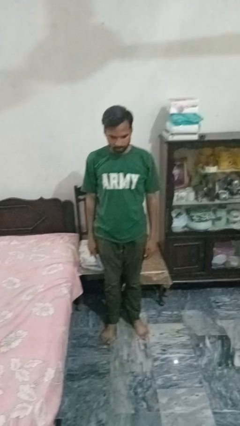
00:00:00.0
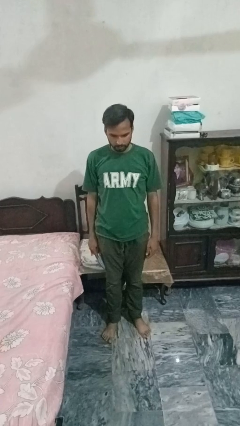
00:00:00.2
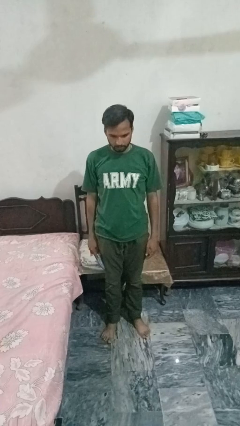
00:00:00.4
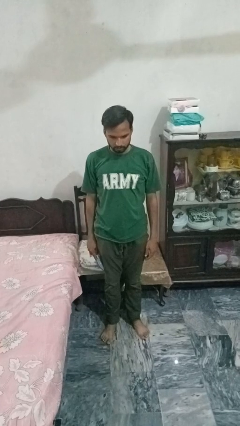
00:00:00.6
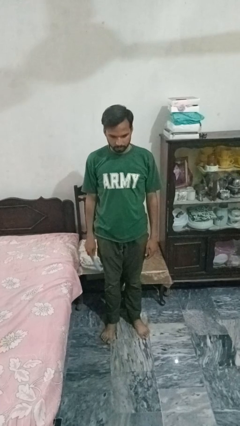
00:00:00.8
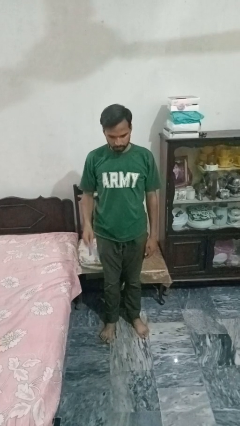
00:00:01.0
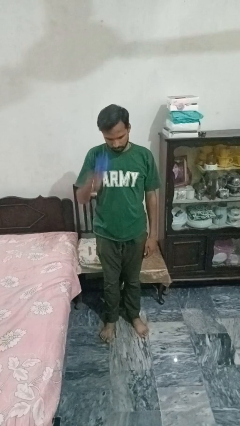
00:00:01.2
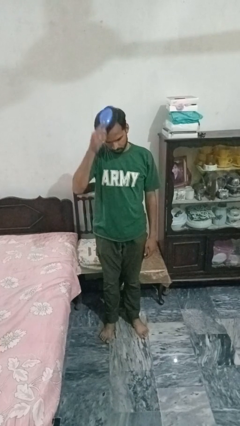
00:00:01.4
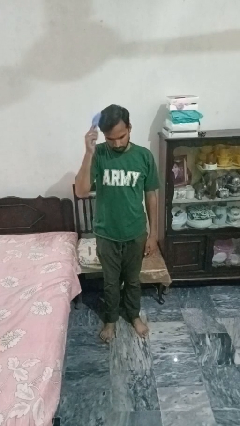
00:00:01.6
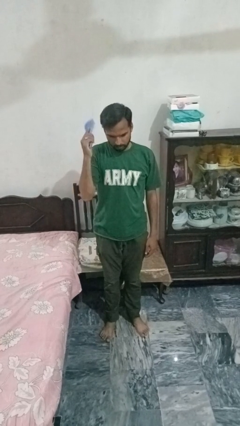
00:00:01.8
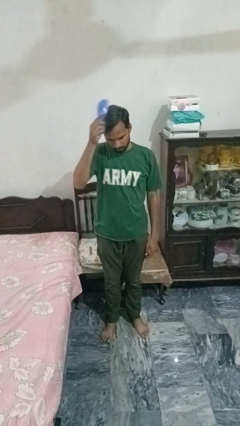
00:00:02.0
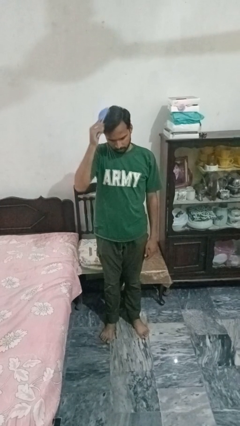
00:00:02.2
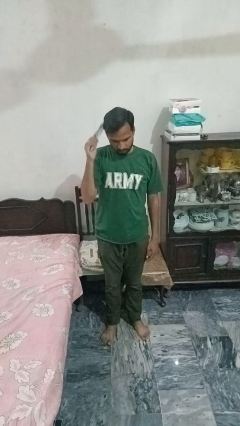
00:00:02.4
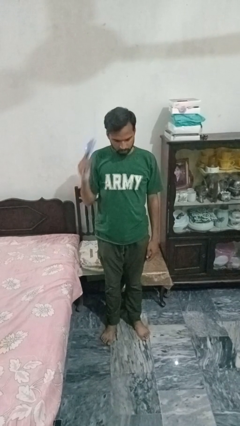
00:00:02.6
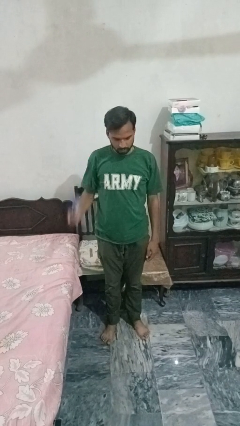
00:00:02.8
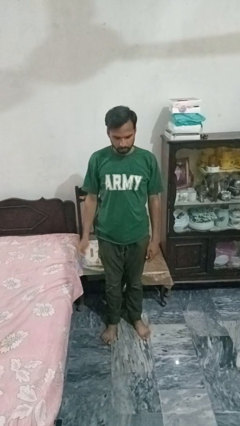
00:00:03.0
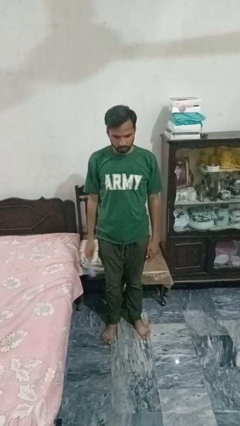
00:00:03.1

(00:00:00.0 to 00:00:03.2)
person brushes hair

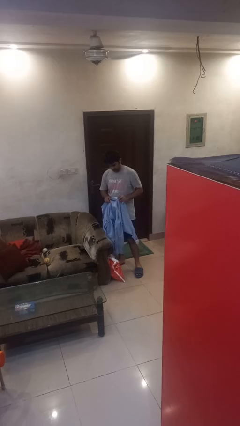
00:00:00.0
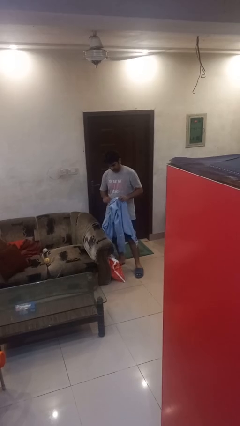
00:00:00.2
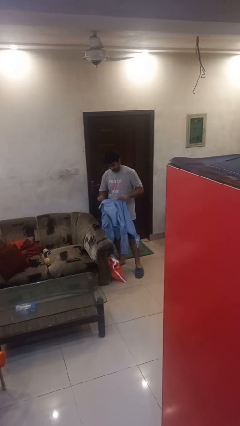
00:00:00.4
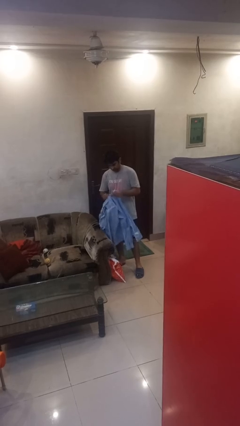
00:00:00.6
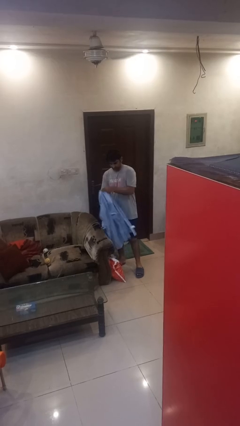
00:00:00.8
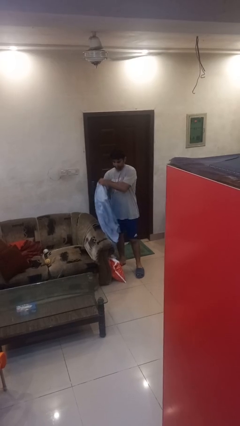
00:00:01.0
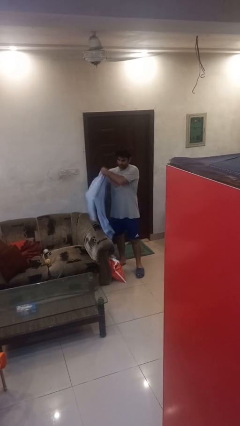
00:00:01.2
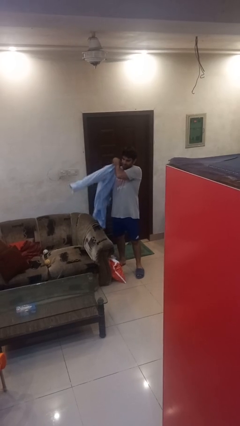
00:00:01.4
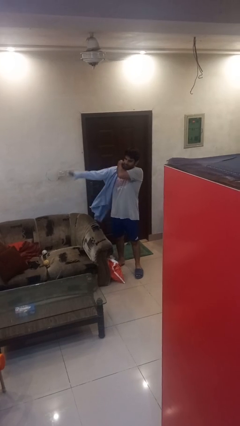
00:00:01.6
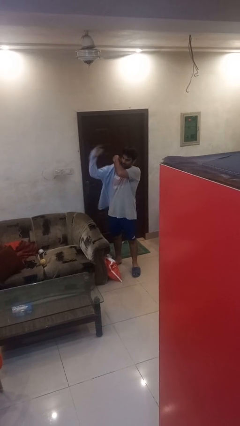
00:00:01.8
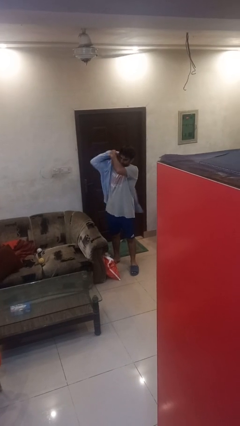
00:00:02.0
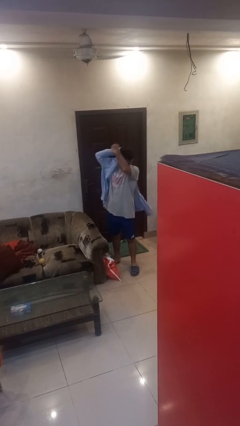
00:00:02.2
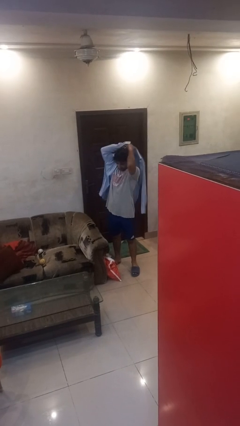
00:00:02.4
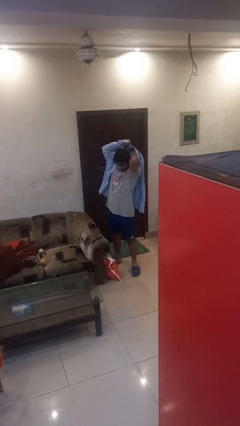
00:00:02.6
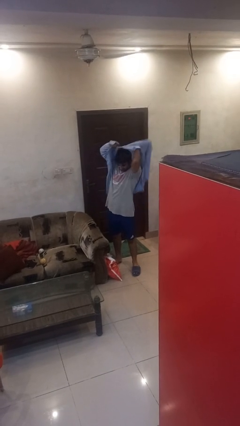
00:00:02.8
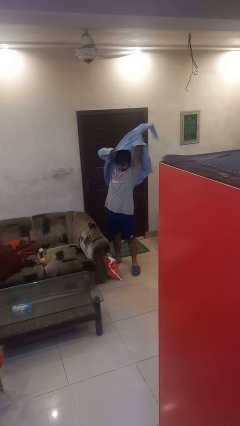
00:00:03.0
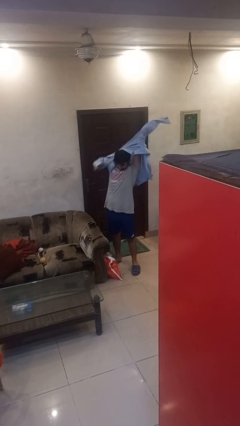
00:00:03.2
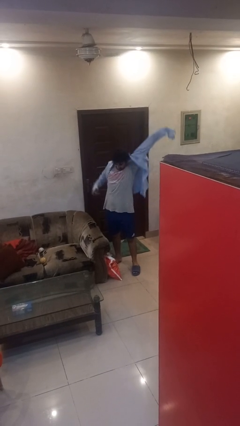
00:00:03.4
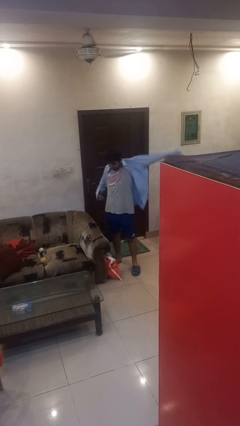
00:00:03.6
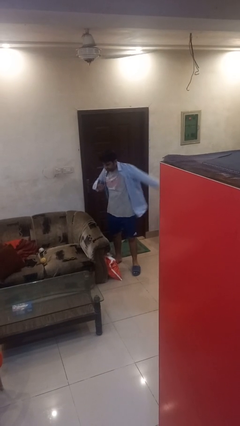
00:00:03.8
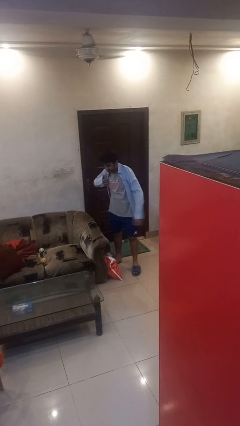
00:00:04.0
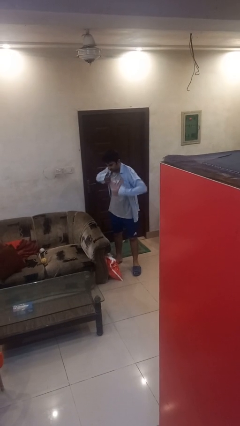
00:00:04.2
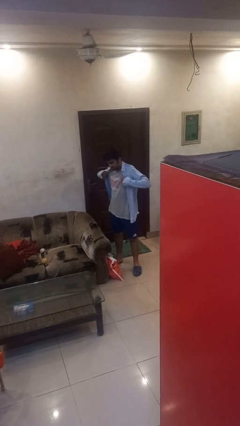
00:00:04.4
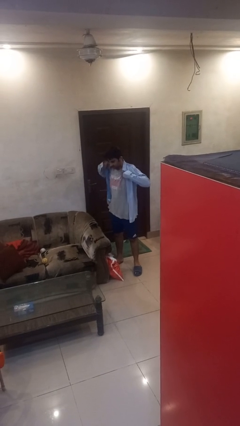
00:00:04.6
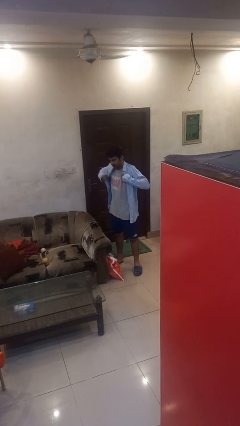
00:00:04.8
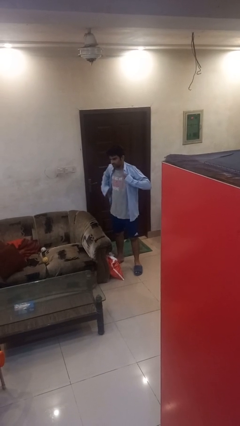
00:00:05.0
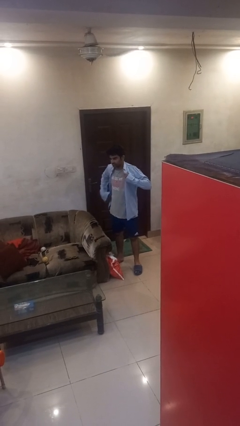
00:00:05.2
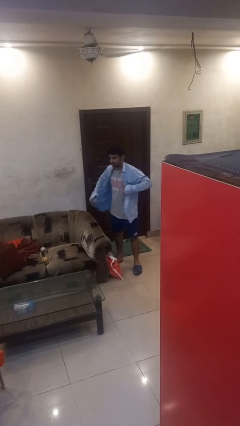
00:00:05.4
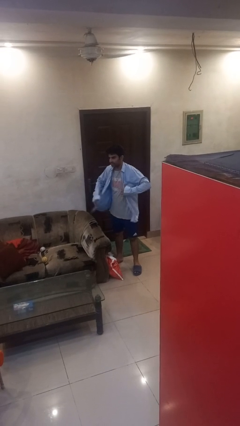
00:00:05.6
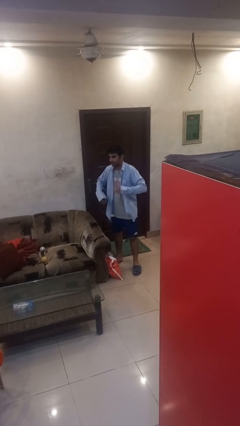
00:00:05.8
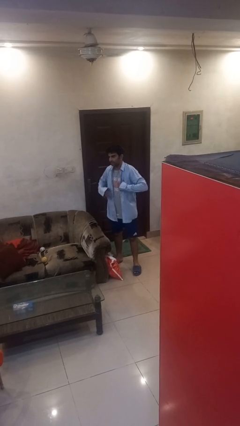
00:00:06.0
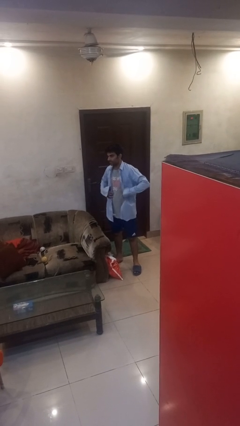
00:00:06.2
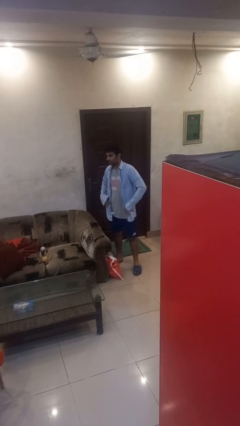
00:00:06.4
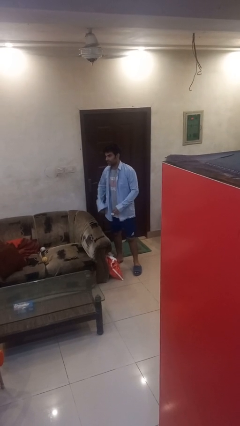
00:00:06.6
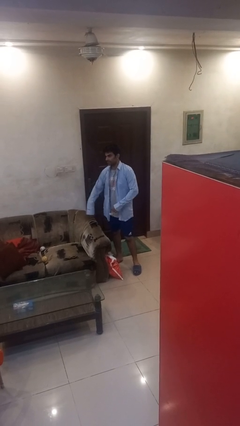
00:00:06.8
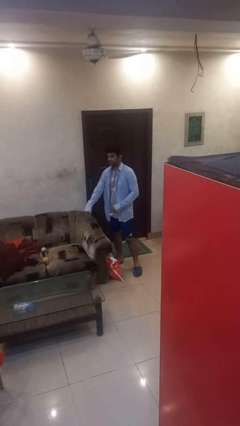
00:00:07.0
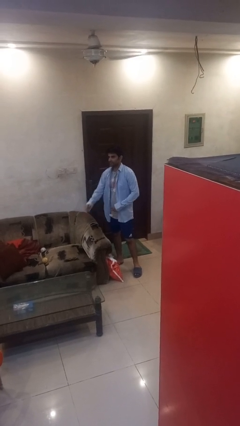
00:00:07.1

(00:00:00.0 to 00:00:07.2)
person puts on shirt

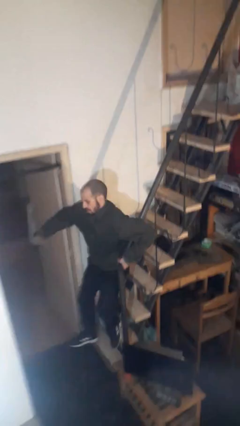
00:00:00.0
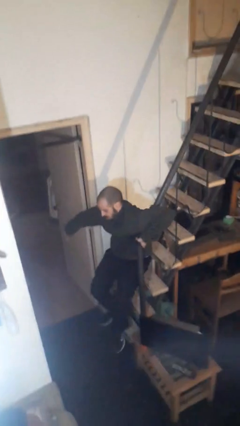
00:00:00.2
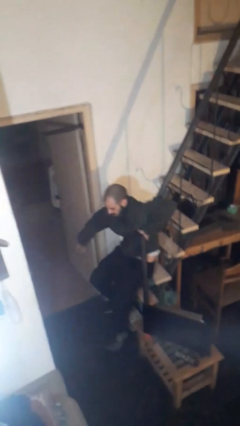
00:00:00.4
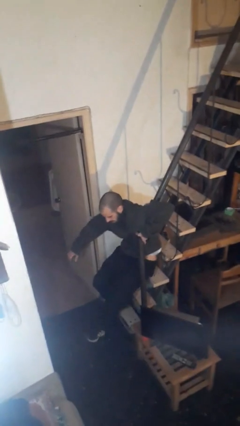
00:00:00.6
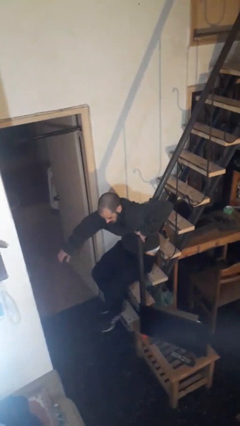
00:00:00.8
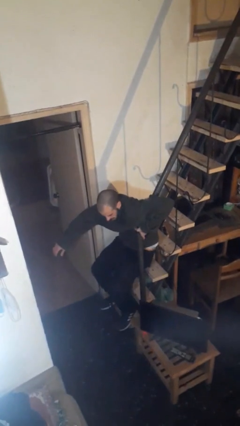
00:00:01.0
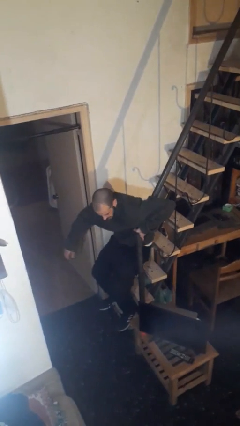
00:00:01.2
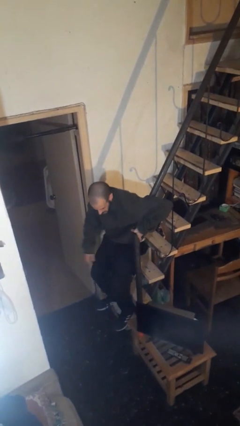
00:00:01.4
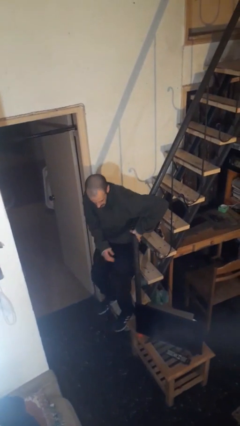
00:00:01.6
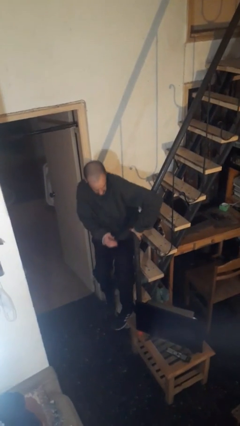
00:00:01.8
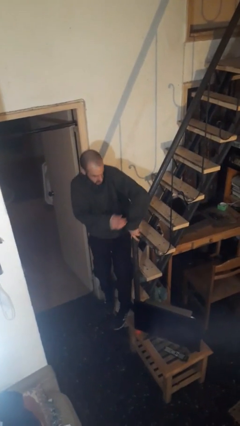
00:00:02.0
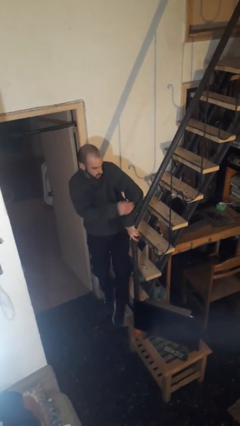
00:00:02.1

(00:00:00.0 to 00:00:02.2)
person trips on stair

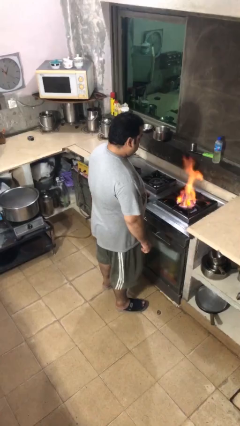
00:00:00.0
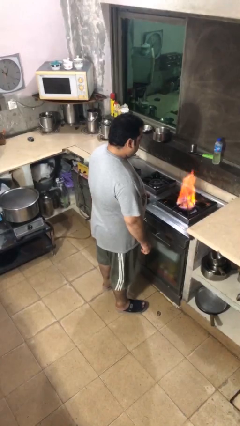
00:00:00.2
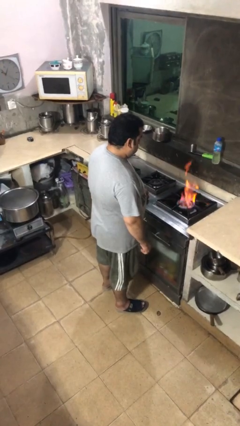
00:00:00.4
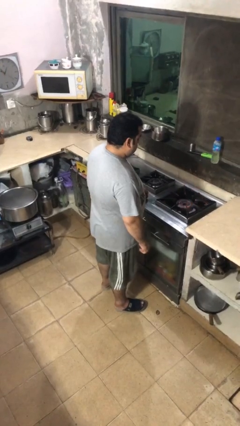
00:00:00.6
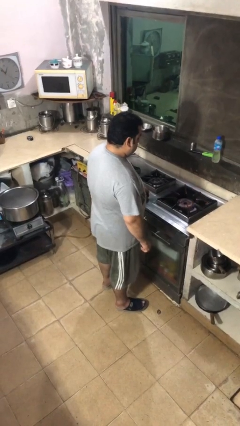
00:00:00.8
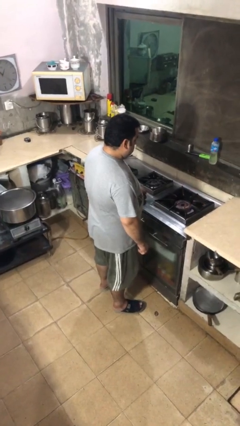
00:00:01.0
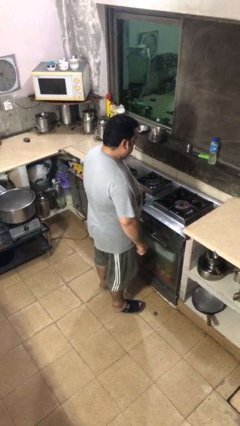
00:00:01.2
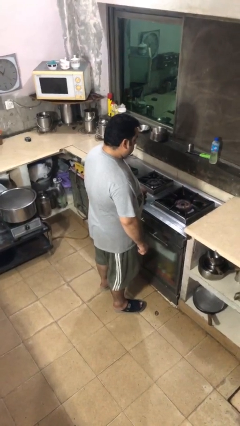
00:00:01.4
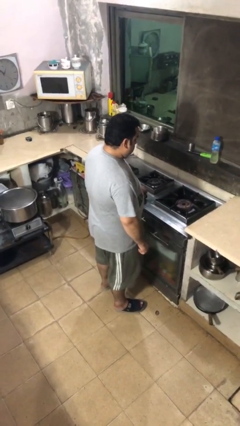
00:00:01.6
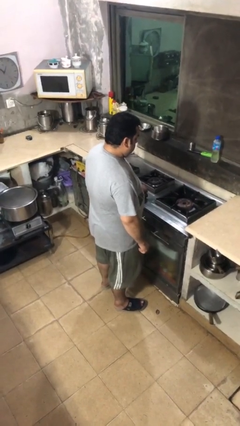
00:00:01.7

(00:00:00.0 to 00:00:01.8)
person turns off stovetop

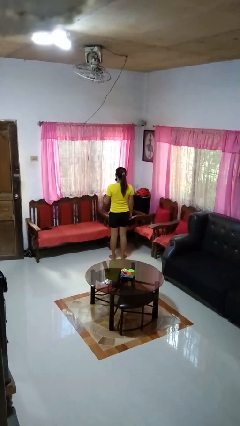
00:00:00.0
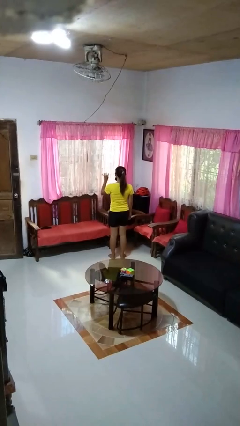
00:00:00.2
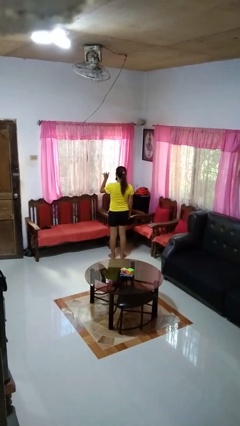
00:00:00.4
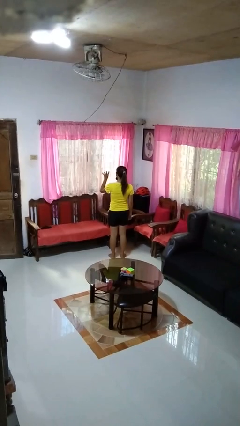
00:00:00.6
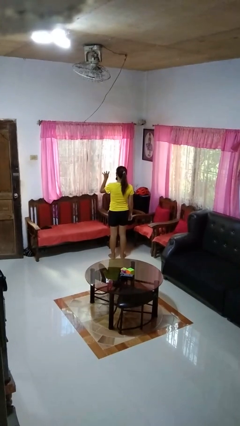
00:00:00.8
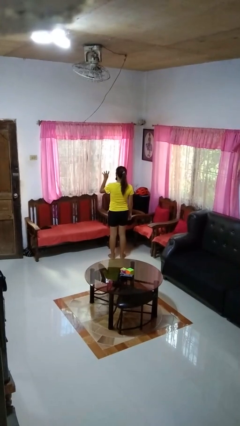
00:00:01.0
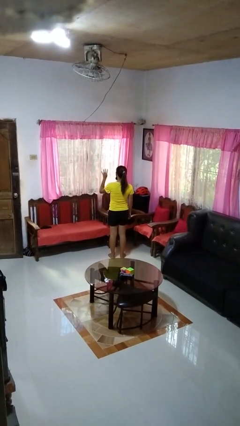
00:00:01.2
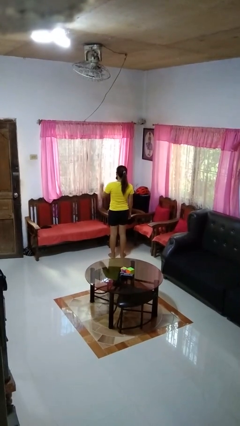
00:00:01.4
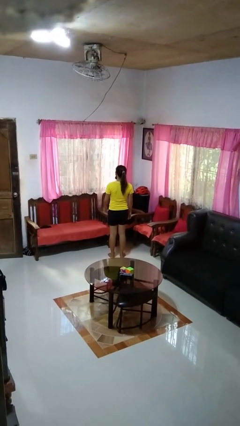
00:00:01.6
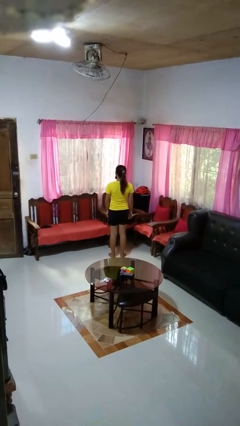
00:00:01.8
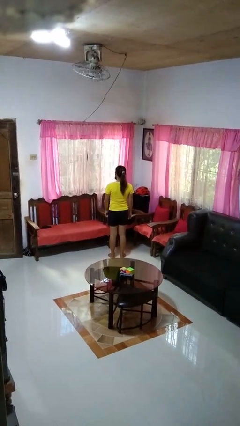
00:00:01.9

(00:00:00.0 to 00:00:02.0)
person gestures number four

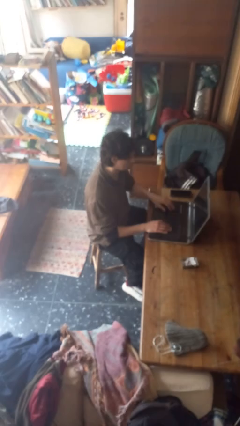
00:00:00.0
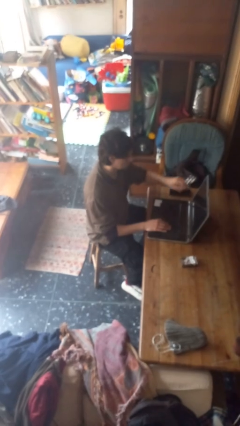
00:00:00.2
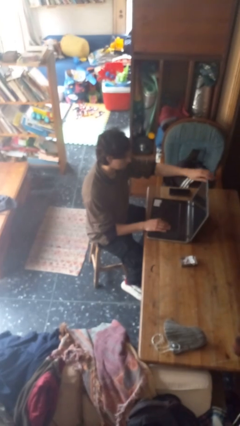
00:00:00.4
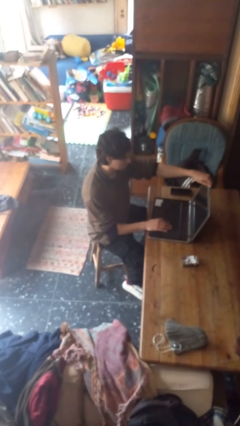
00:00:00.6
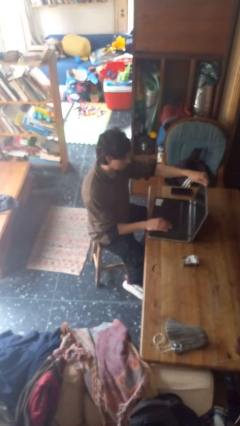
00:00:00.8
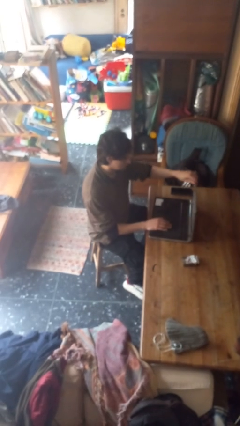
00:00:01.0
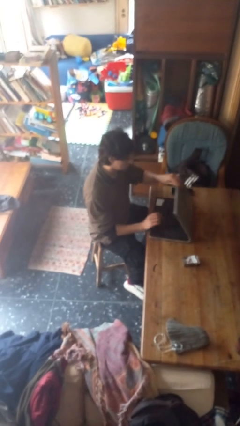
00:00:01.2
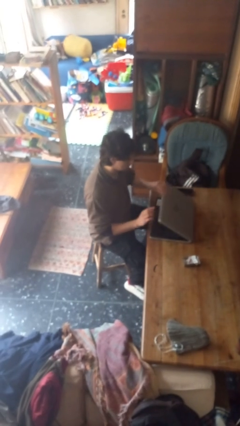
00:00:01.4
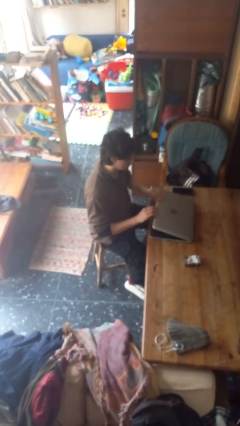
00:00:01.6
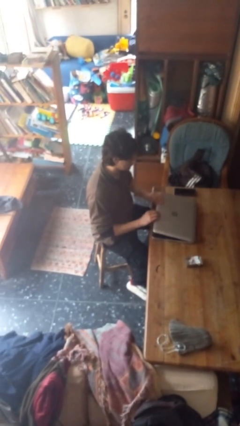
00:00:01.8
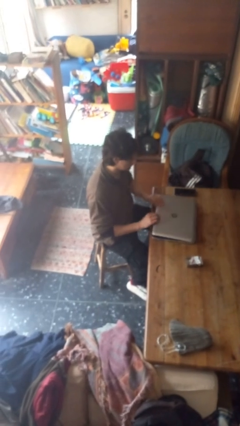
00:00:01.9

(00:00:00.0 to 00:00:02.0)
person closes laptop
